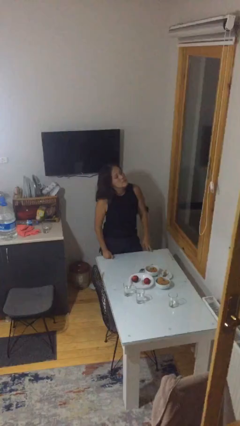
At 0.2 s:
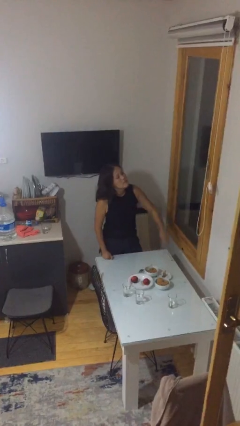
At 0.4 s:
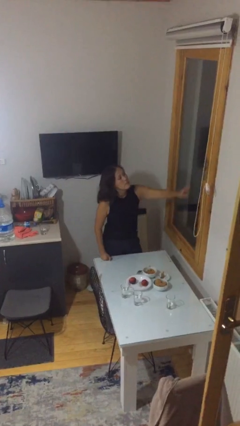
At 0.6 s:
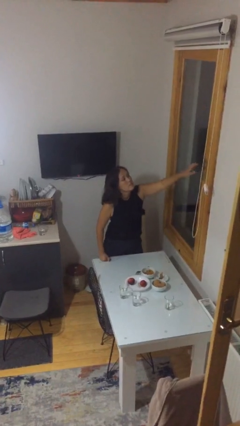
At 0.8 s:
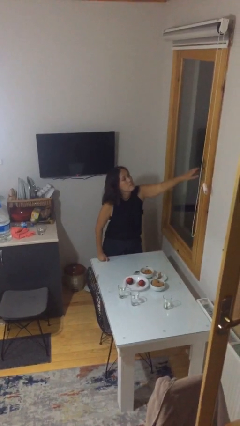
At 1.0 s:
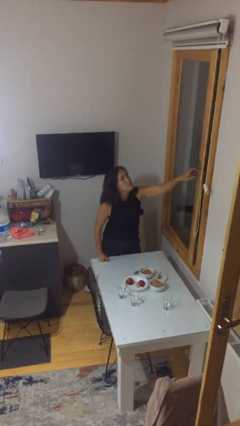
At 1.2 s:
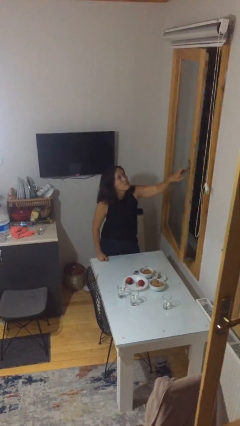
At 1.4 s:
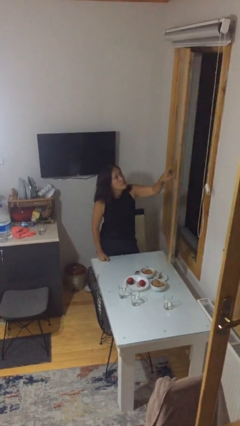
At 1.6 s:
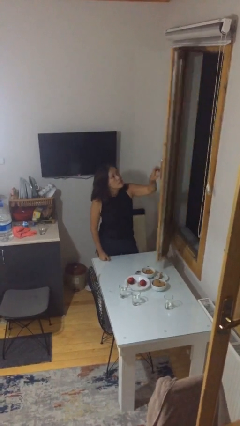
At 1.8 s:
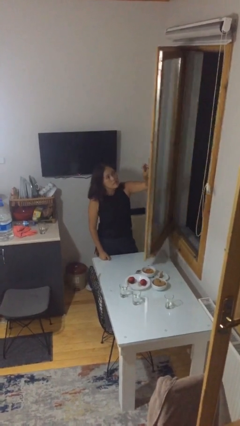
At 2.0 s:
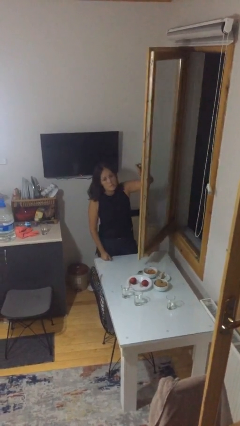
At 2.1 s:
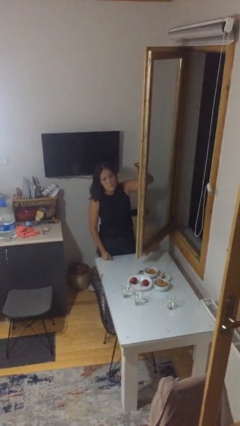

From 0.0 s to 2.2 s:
person opens home window

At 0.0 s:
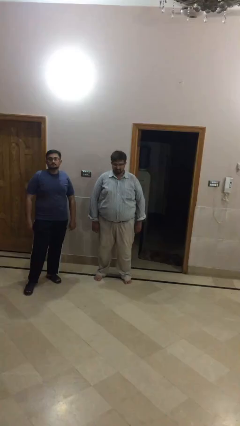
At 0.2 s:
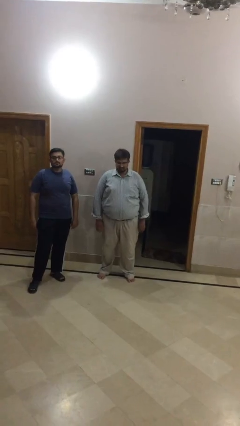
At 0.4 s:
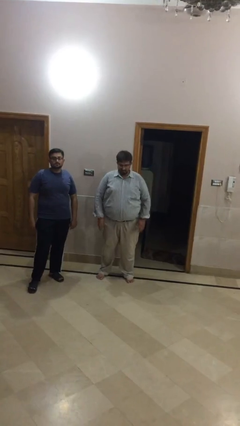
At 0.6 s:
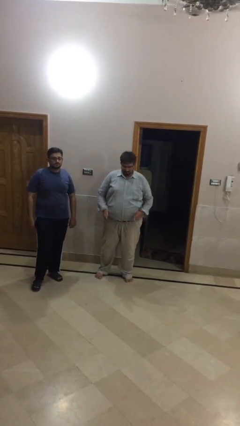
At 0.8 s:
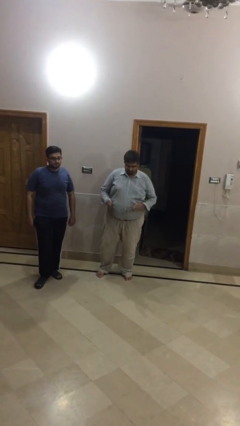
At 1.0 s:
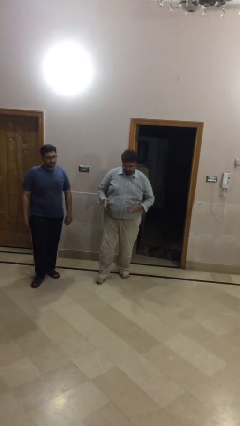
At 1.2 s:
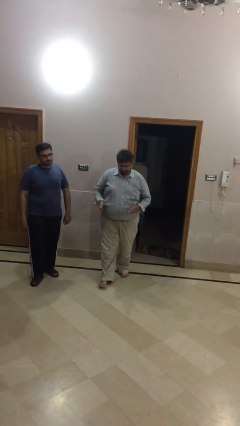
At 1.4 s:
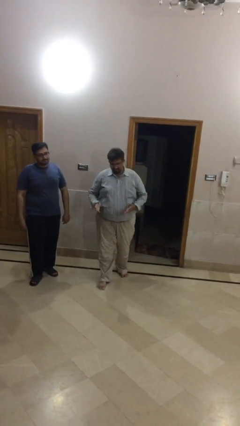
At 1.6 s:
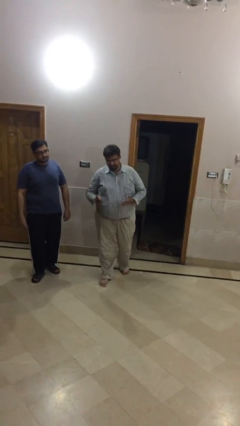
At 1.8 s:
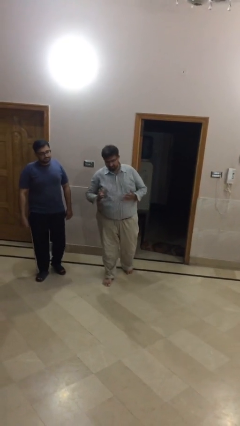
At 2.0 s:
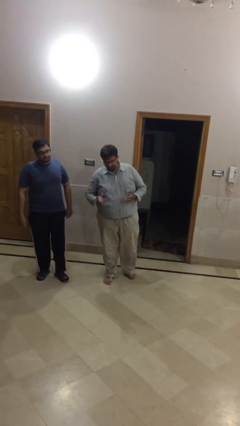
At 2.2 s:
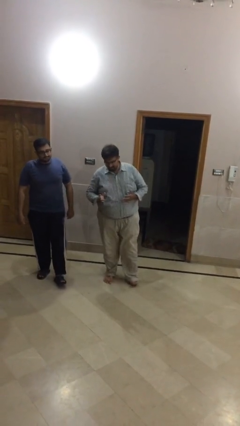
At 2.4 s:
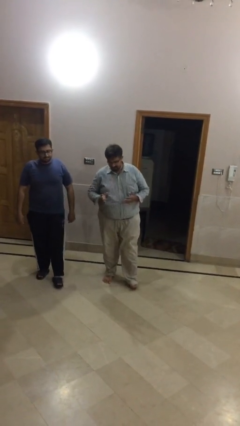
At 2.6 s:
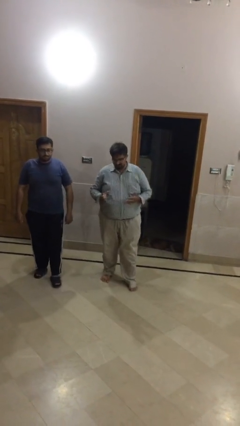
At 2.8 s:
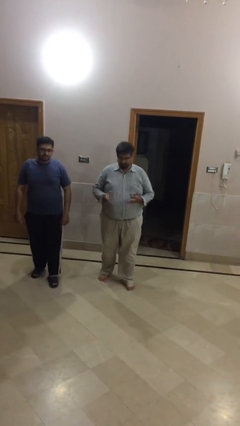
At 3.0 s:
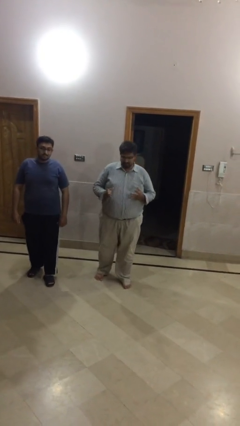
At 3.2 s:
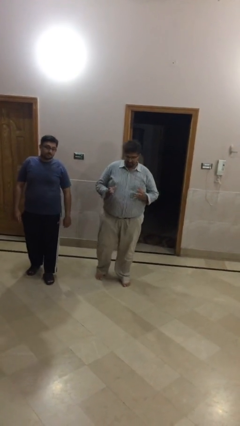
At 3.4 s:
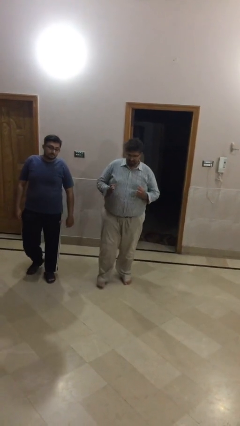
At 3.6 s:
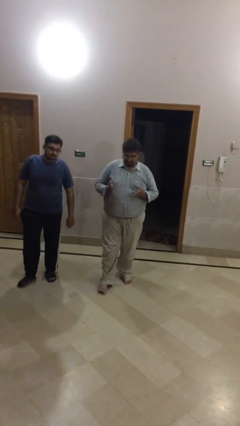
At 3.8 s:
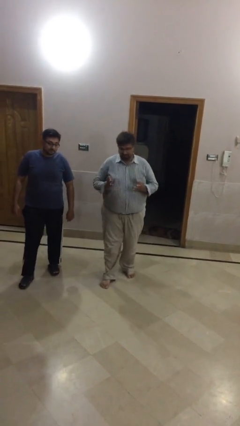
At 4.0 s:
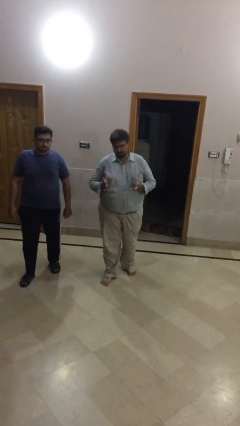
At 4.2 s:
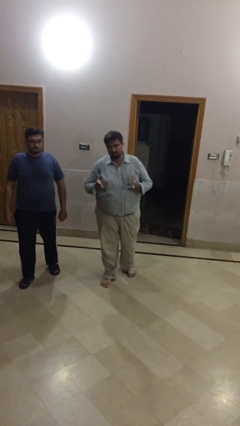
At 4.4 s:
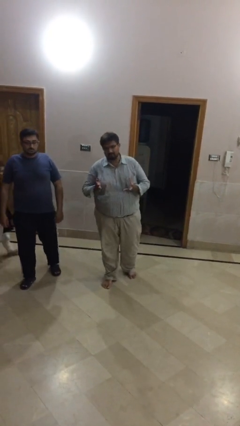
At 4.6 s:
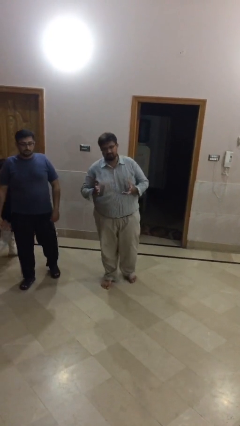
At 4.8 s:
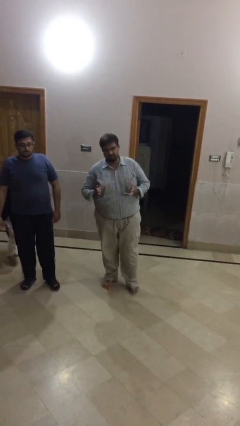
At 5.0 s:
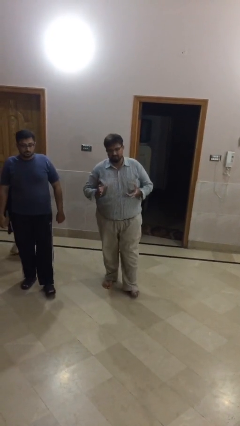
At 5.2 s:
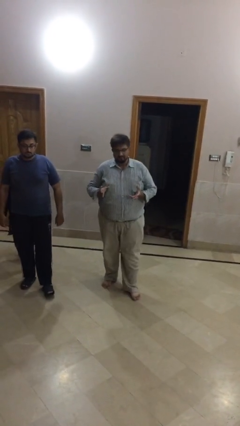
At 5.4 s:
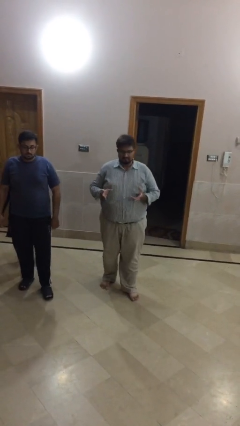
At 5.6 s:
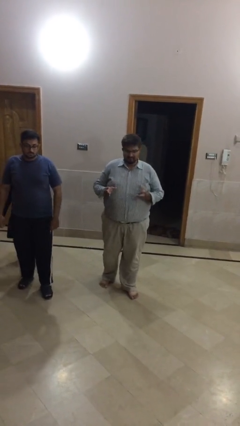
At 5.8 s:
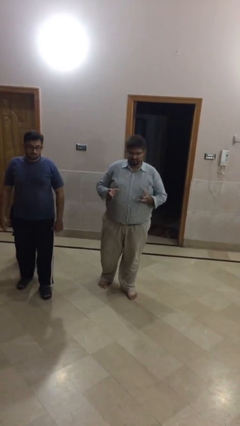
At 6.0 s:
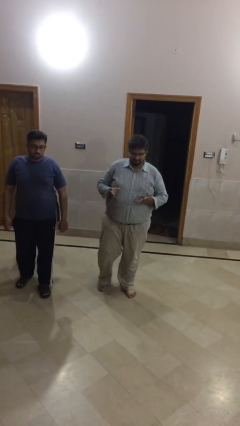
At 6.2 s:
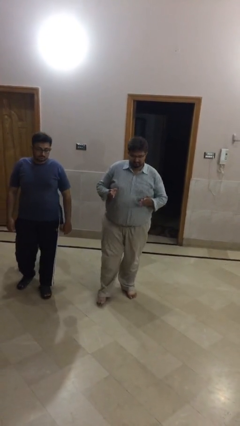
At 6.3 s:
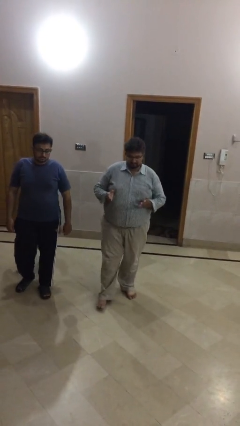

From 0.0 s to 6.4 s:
person talks to person

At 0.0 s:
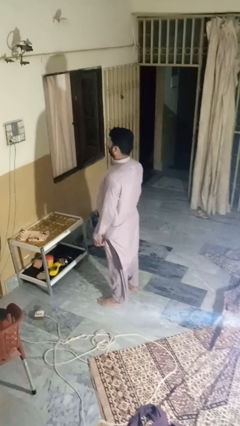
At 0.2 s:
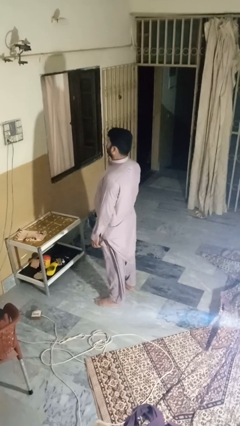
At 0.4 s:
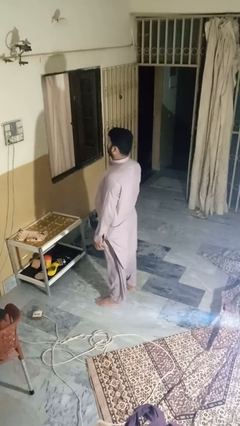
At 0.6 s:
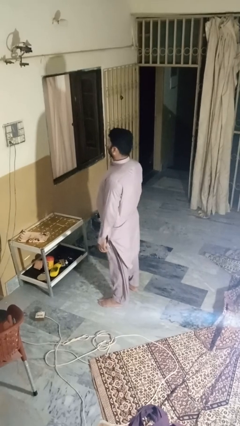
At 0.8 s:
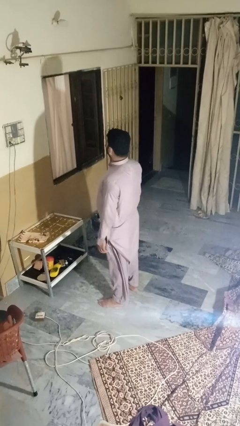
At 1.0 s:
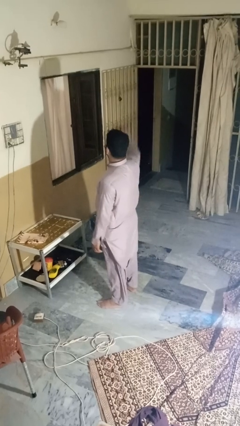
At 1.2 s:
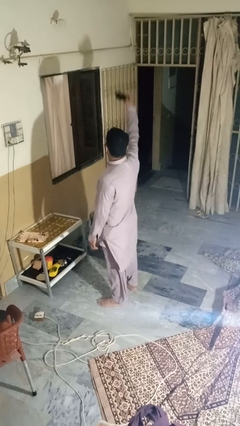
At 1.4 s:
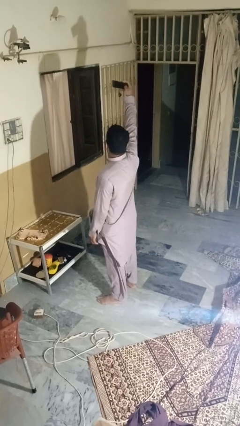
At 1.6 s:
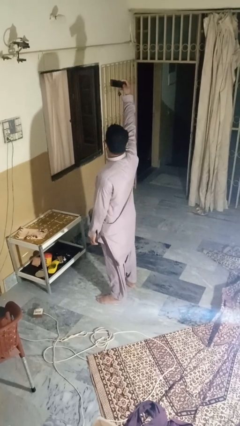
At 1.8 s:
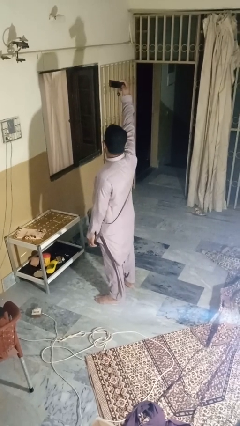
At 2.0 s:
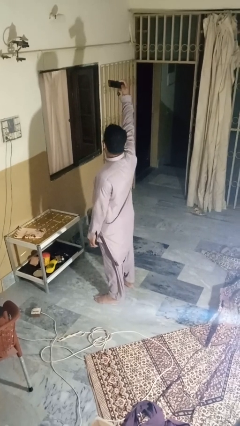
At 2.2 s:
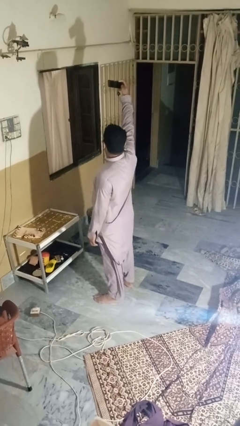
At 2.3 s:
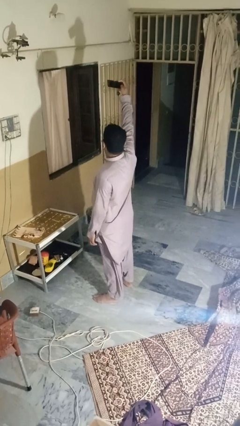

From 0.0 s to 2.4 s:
person takes selfie

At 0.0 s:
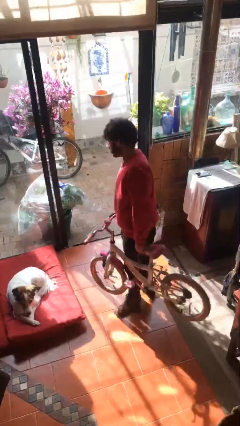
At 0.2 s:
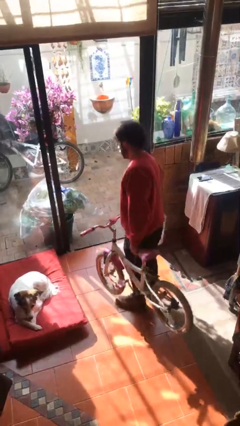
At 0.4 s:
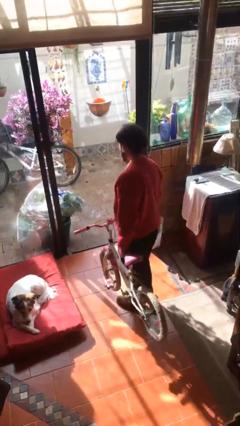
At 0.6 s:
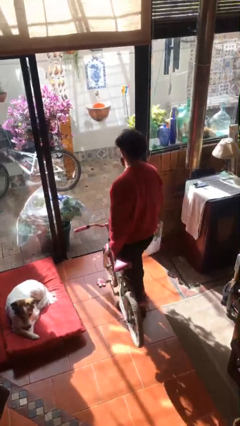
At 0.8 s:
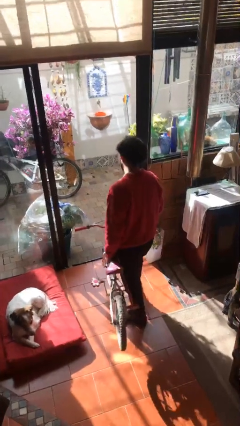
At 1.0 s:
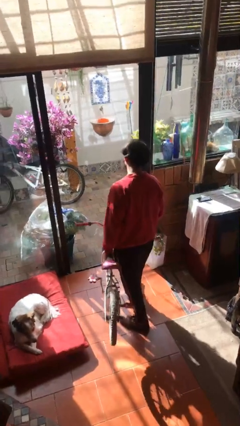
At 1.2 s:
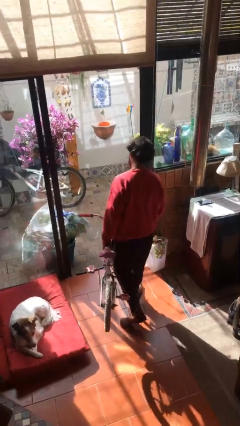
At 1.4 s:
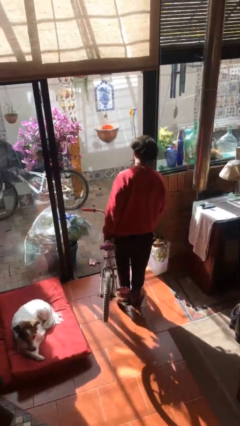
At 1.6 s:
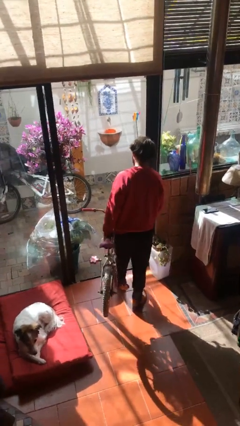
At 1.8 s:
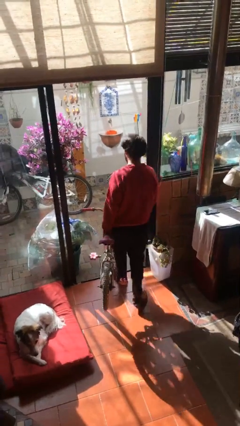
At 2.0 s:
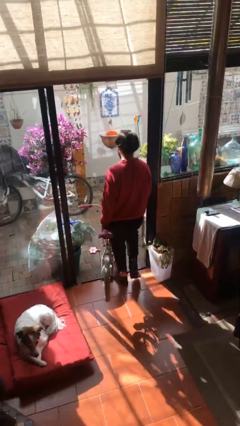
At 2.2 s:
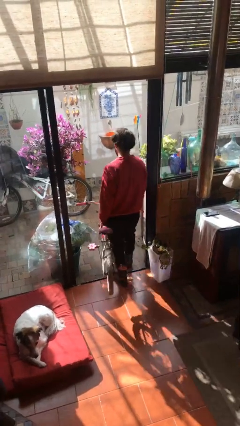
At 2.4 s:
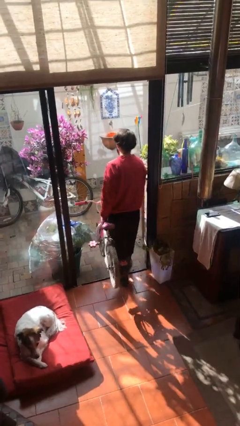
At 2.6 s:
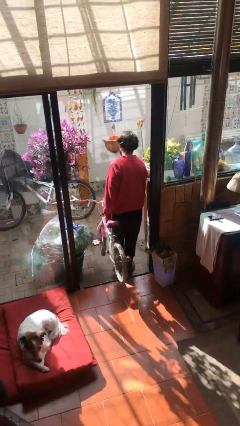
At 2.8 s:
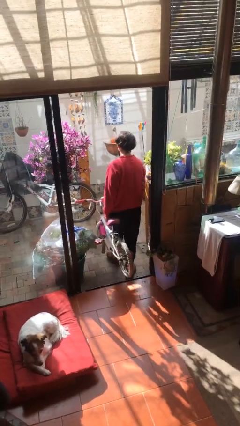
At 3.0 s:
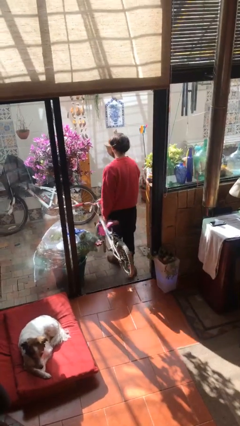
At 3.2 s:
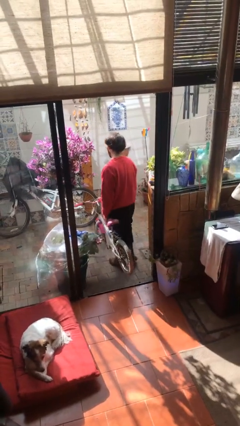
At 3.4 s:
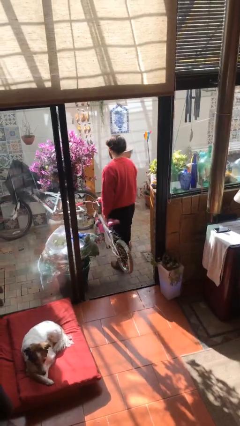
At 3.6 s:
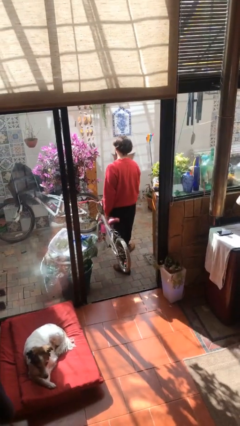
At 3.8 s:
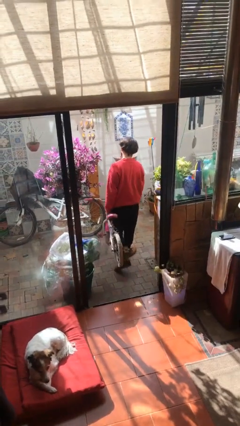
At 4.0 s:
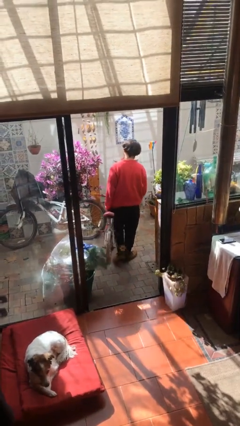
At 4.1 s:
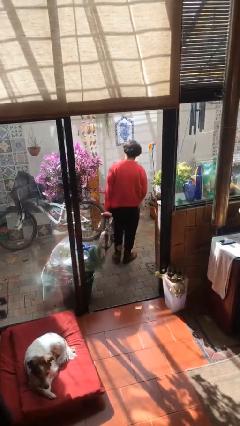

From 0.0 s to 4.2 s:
person carries bicycle

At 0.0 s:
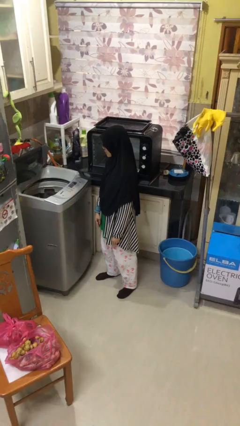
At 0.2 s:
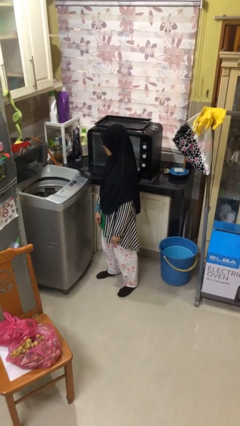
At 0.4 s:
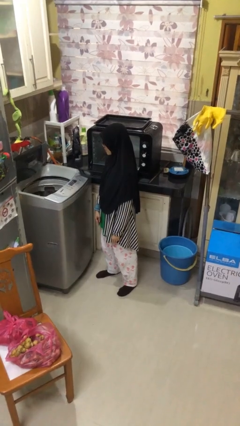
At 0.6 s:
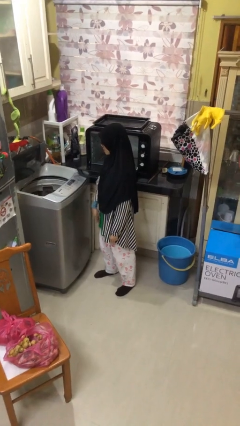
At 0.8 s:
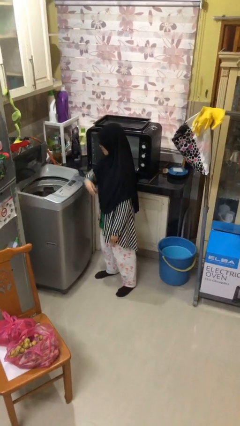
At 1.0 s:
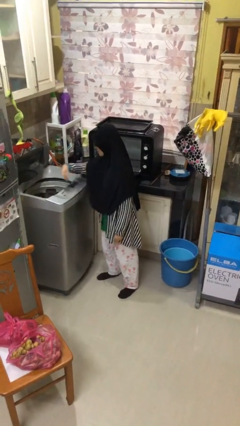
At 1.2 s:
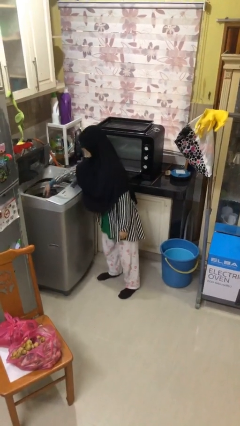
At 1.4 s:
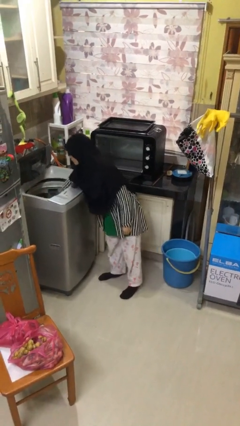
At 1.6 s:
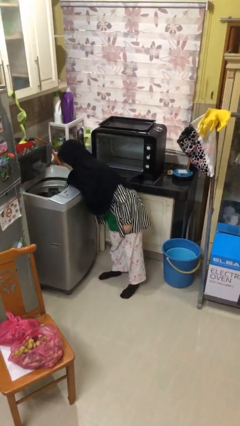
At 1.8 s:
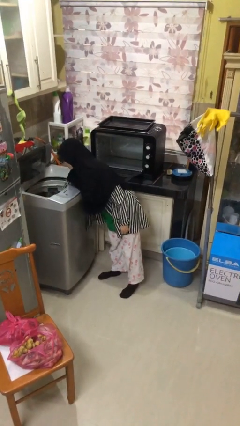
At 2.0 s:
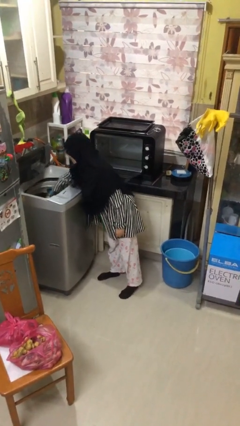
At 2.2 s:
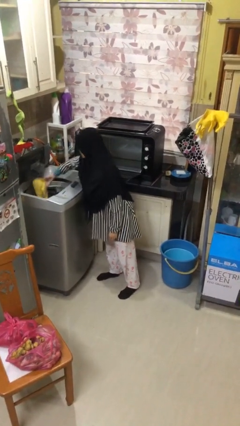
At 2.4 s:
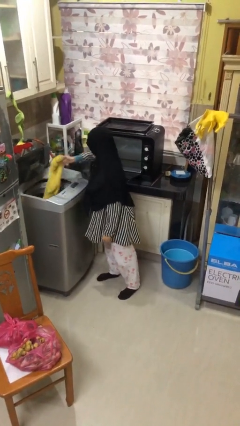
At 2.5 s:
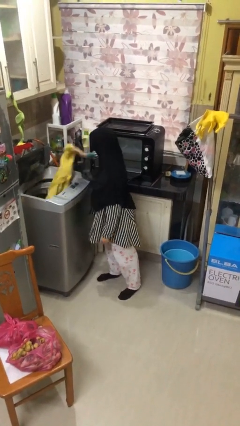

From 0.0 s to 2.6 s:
person unloads clotheswasher
